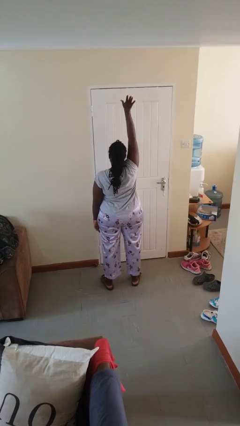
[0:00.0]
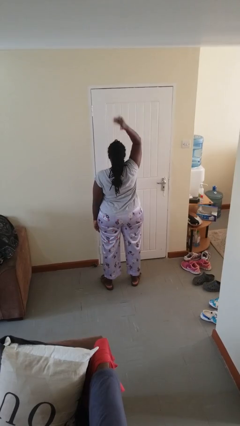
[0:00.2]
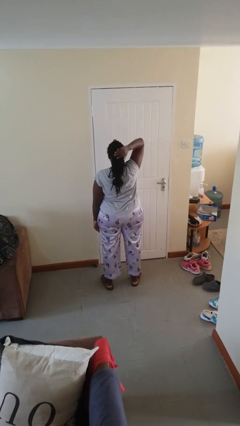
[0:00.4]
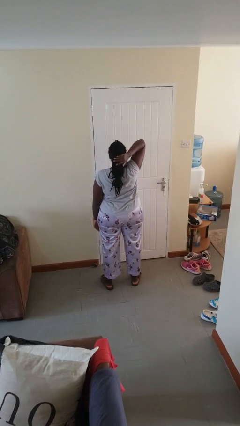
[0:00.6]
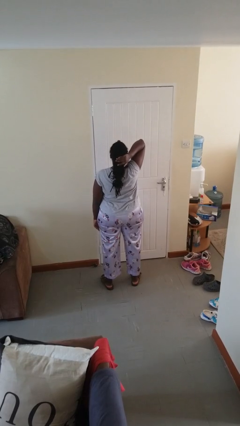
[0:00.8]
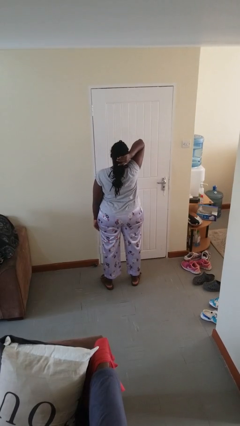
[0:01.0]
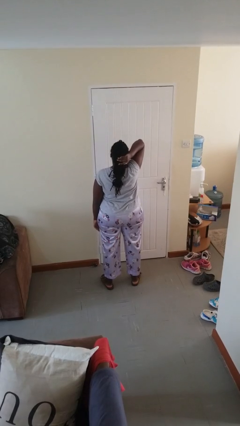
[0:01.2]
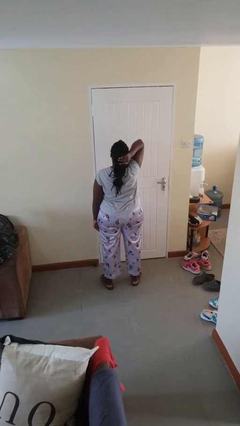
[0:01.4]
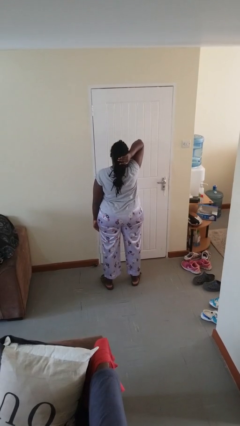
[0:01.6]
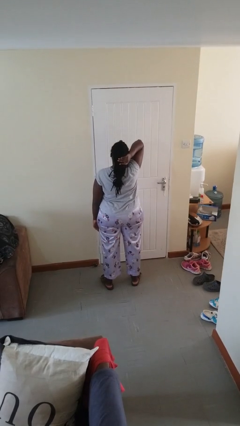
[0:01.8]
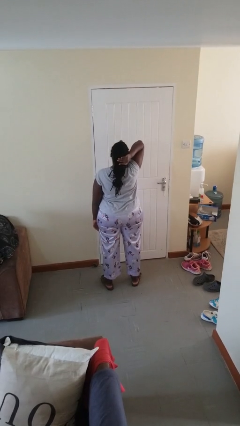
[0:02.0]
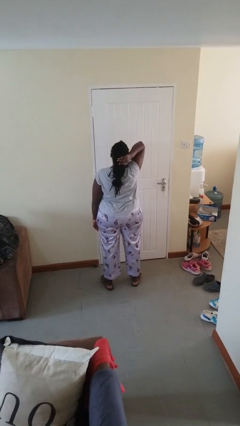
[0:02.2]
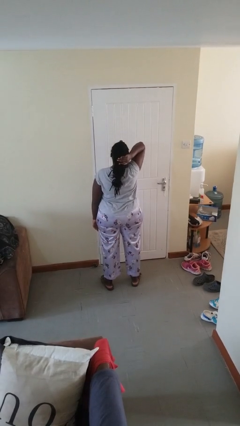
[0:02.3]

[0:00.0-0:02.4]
person gestures lower hand

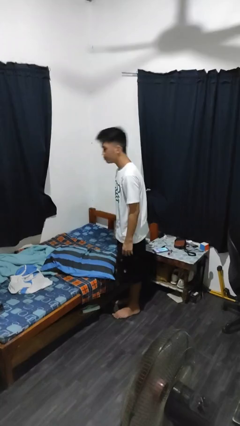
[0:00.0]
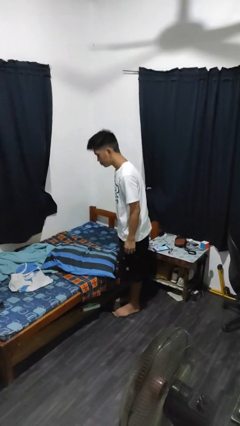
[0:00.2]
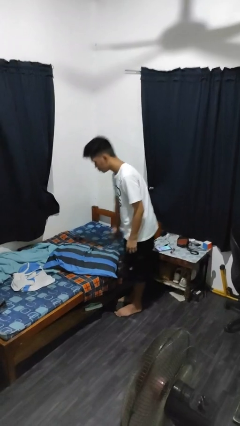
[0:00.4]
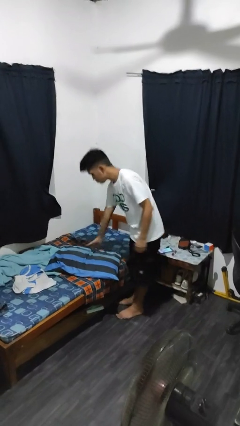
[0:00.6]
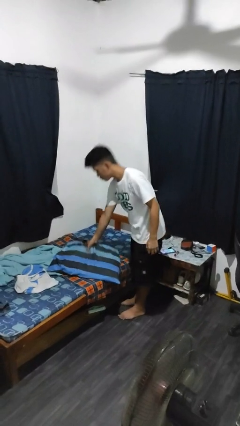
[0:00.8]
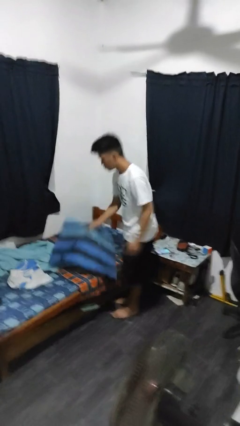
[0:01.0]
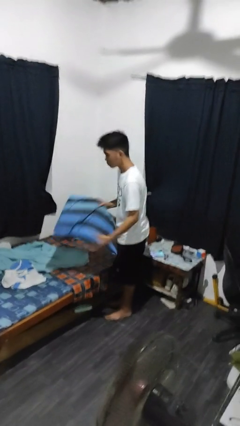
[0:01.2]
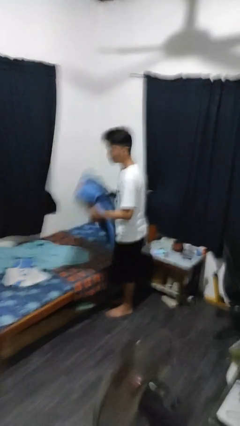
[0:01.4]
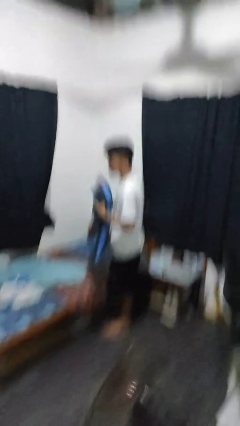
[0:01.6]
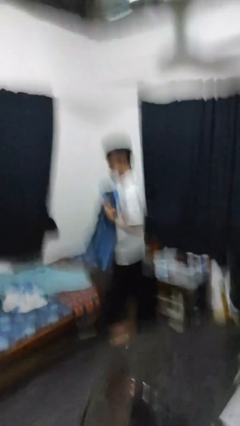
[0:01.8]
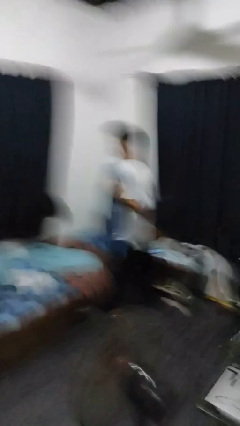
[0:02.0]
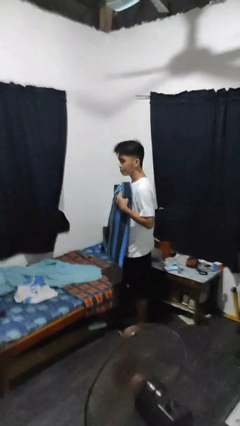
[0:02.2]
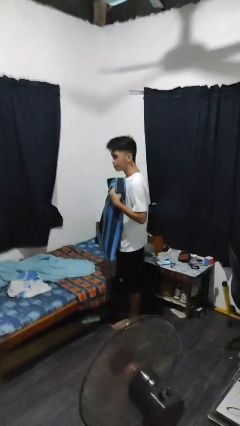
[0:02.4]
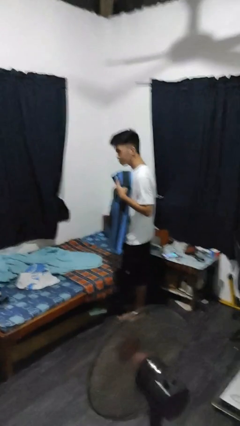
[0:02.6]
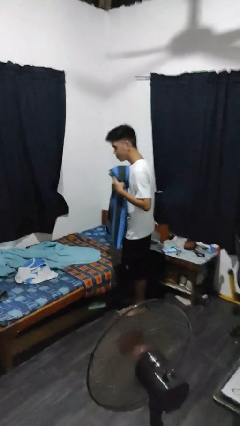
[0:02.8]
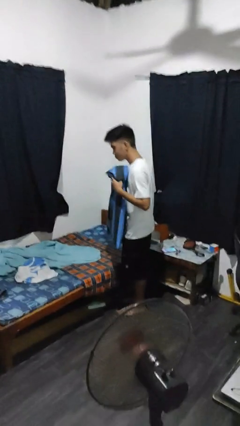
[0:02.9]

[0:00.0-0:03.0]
person picks up object from bed

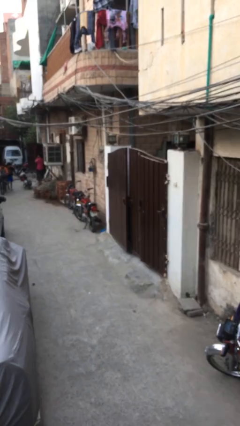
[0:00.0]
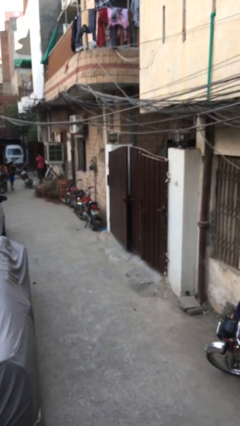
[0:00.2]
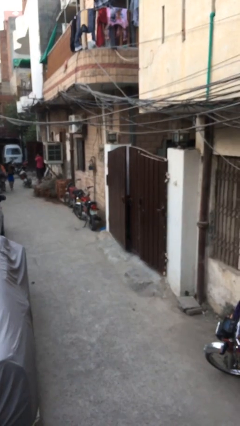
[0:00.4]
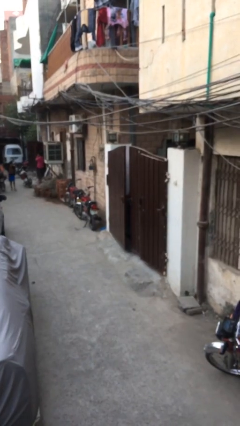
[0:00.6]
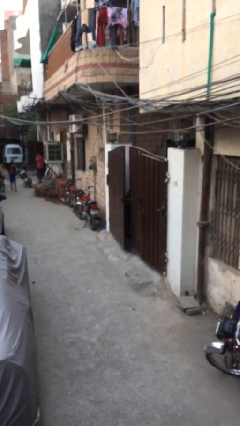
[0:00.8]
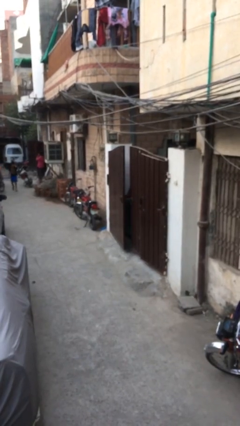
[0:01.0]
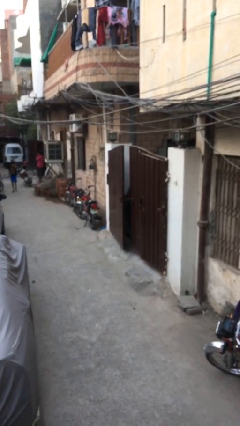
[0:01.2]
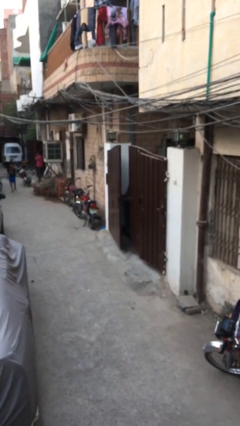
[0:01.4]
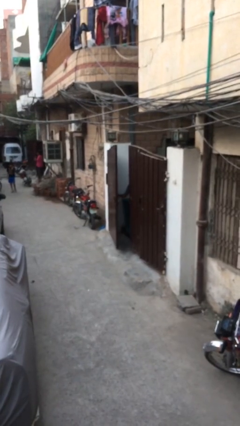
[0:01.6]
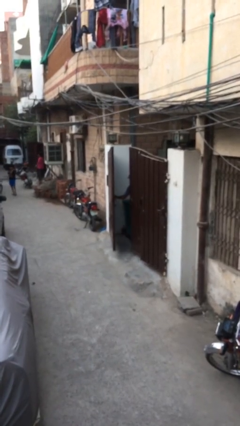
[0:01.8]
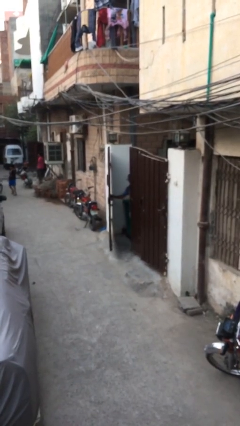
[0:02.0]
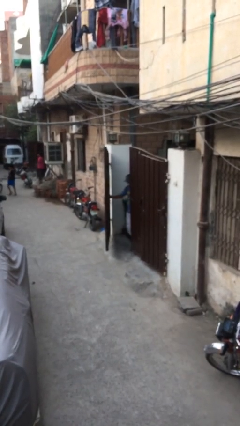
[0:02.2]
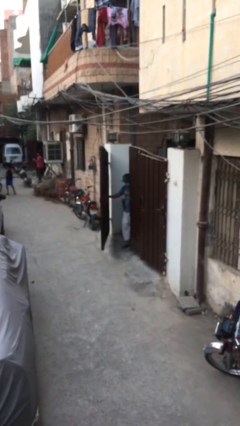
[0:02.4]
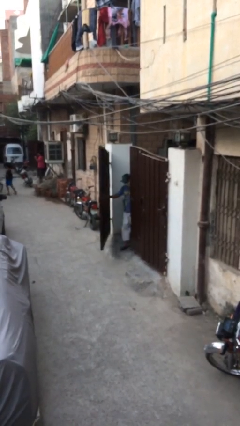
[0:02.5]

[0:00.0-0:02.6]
person opens facility door

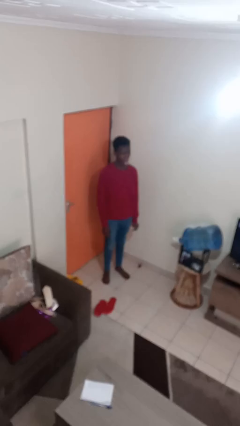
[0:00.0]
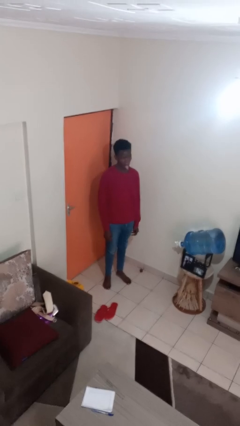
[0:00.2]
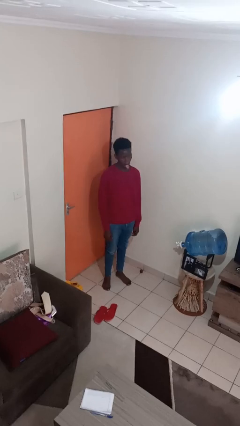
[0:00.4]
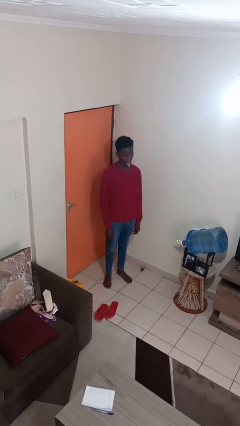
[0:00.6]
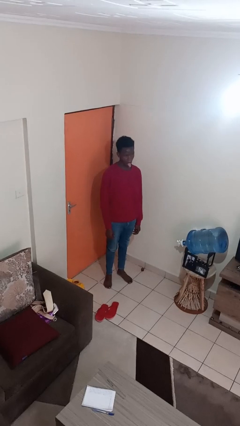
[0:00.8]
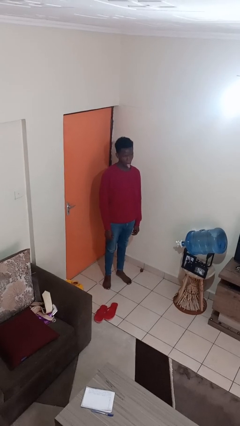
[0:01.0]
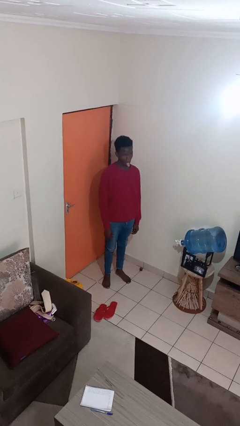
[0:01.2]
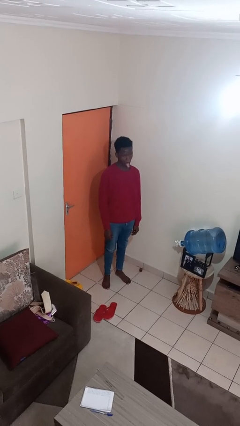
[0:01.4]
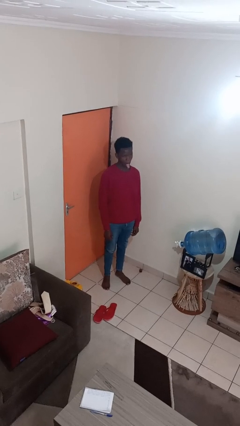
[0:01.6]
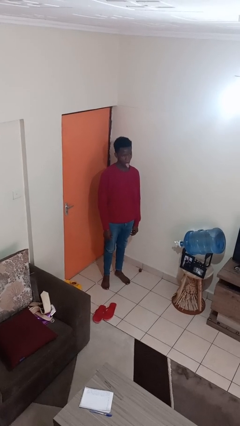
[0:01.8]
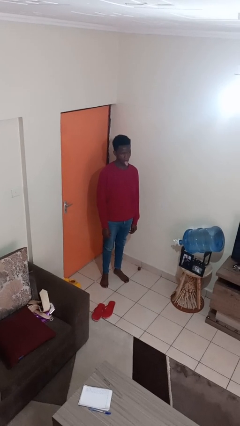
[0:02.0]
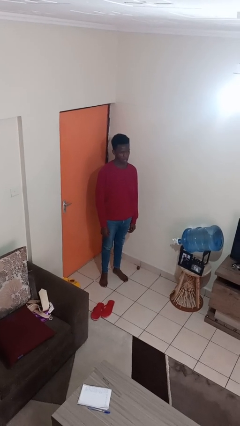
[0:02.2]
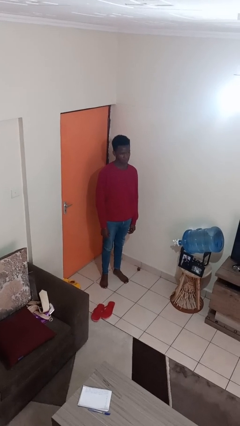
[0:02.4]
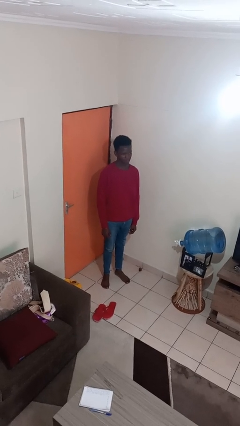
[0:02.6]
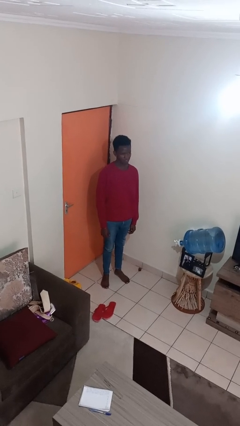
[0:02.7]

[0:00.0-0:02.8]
person sticks out tongue

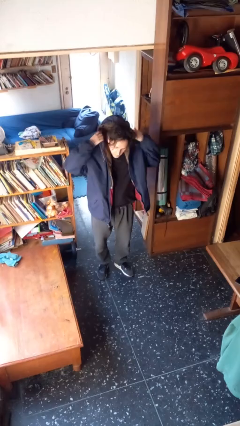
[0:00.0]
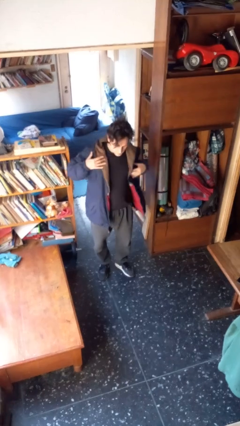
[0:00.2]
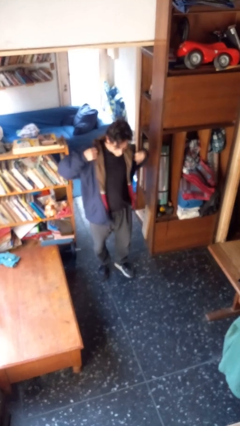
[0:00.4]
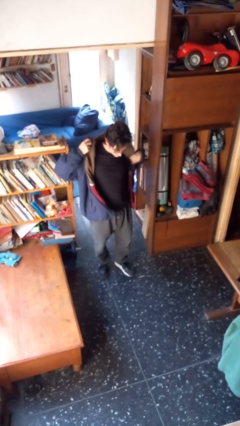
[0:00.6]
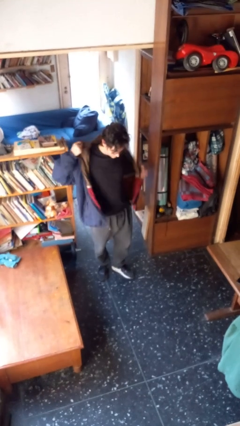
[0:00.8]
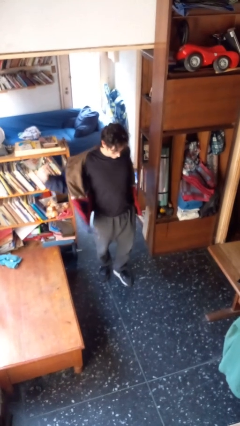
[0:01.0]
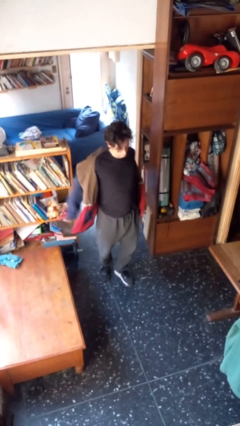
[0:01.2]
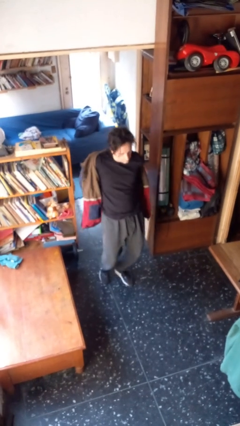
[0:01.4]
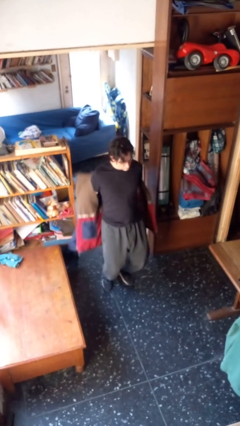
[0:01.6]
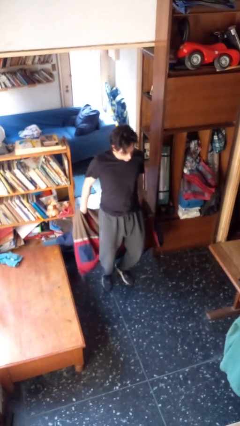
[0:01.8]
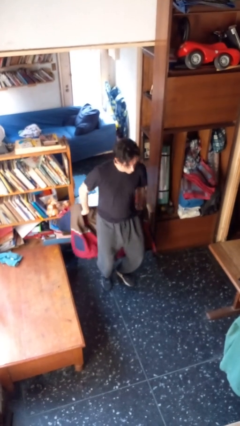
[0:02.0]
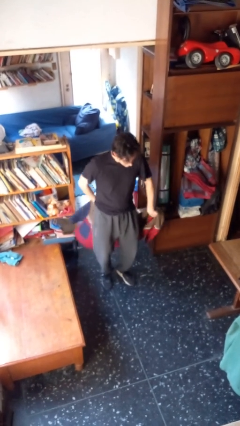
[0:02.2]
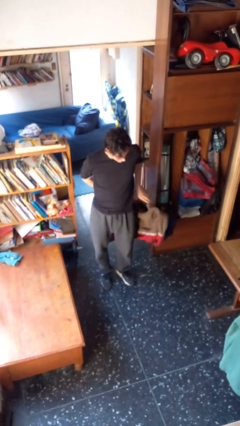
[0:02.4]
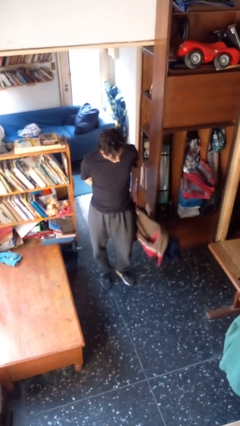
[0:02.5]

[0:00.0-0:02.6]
person takes off hoodie

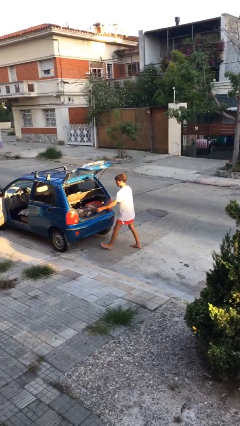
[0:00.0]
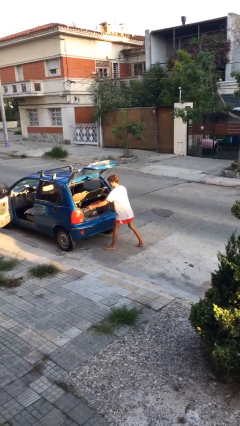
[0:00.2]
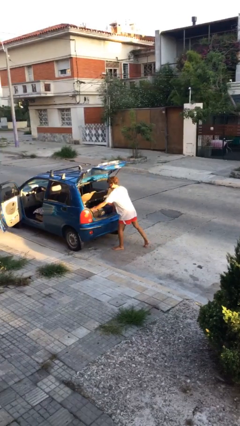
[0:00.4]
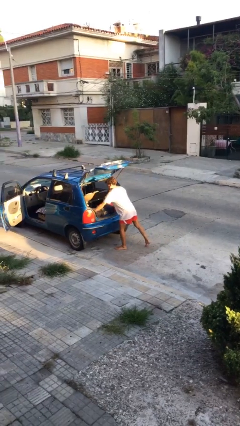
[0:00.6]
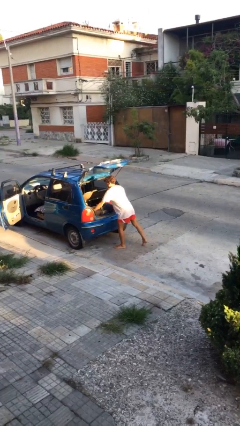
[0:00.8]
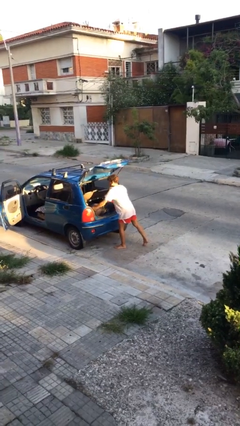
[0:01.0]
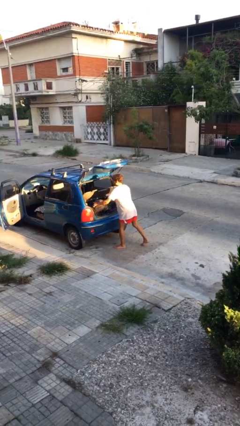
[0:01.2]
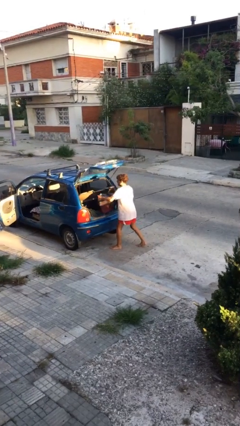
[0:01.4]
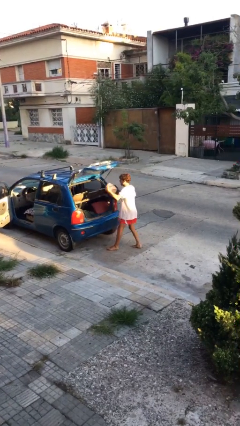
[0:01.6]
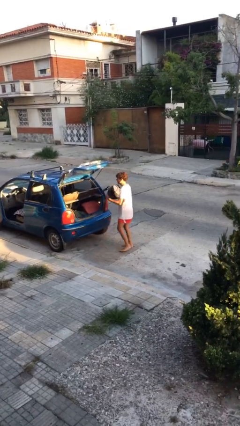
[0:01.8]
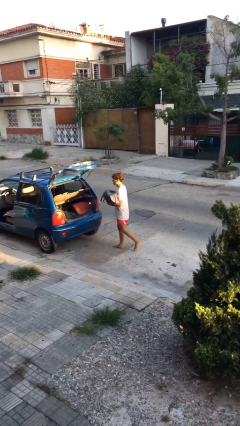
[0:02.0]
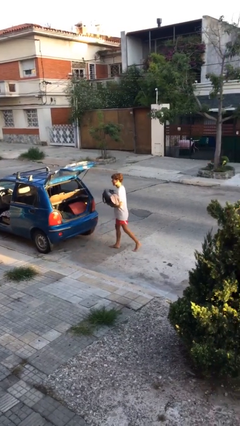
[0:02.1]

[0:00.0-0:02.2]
person unloads car

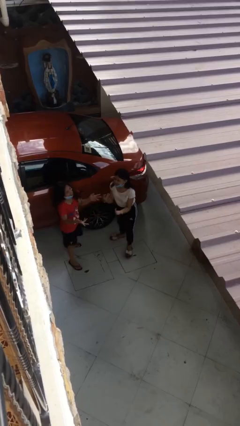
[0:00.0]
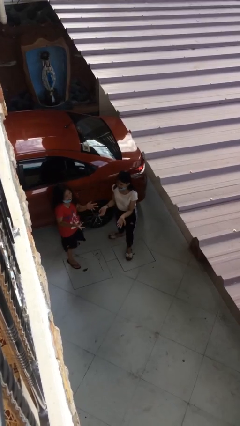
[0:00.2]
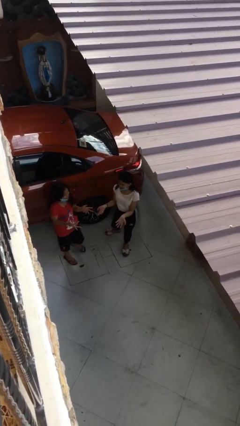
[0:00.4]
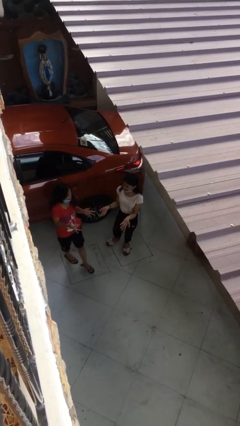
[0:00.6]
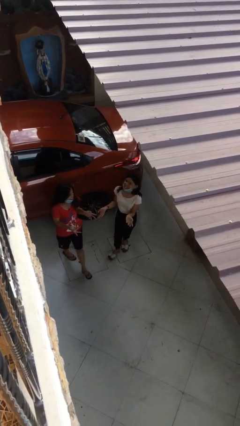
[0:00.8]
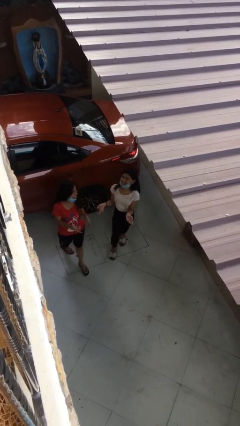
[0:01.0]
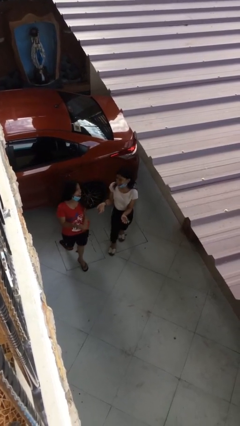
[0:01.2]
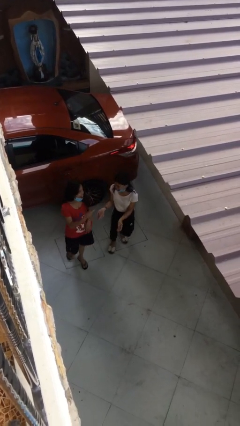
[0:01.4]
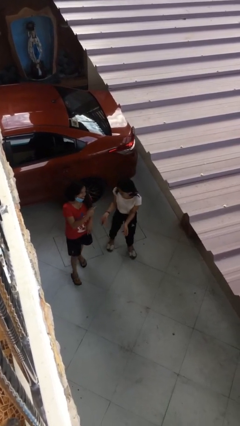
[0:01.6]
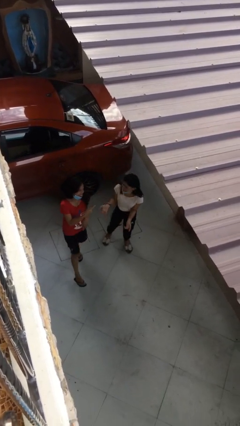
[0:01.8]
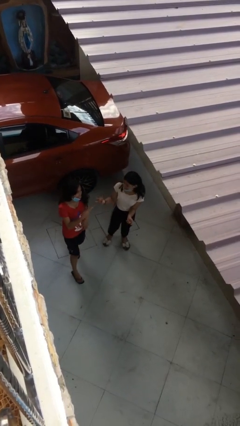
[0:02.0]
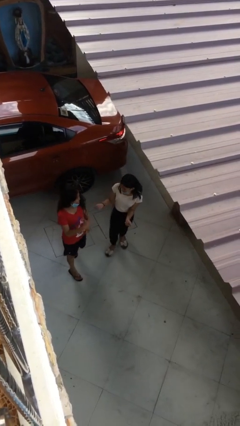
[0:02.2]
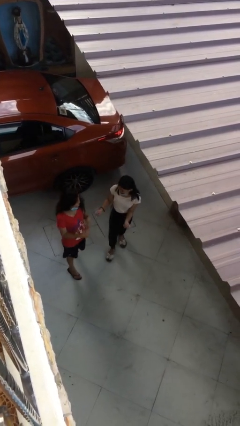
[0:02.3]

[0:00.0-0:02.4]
person talks to person
